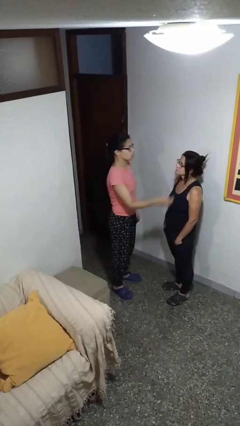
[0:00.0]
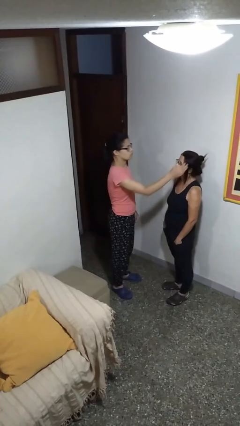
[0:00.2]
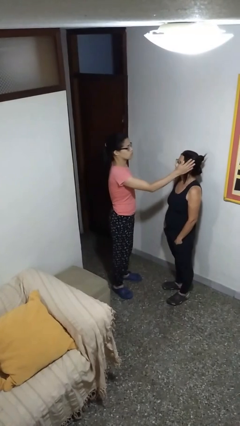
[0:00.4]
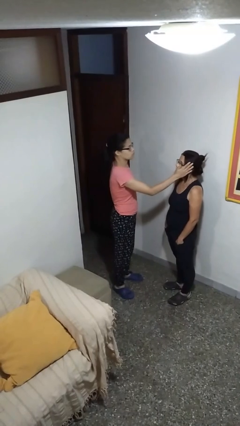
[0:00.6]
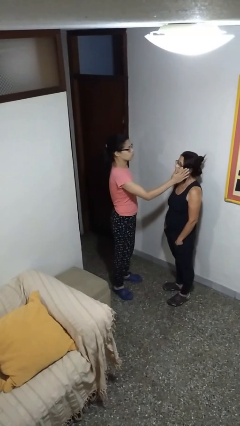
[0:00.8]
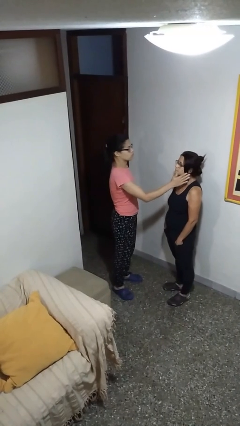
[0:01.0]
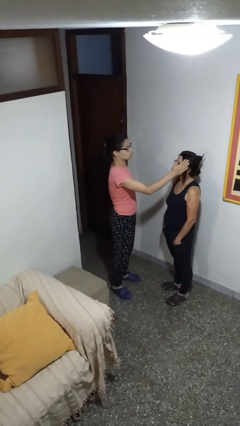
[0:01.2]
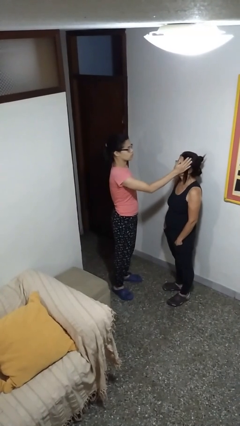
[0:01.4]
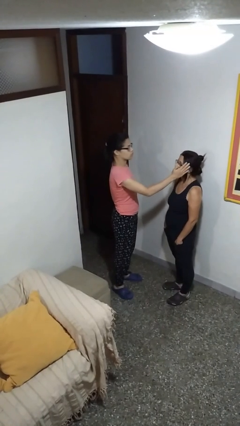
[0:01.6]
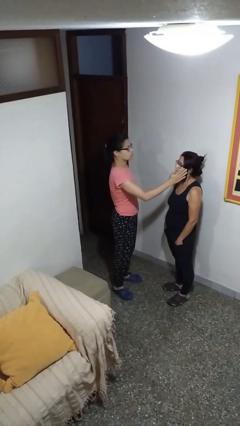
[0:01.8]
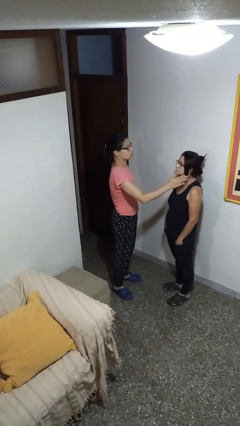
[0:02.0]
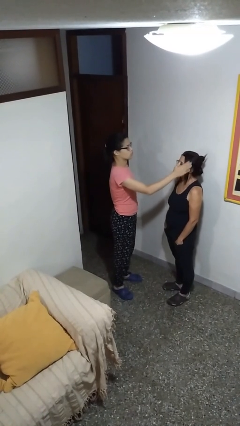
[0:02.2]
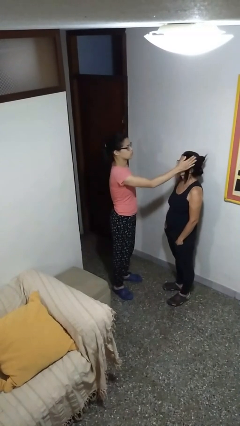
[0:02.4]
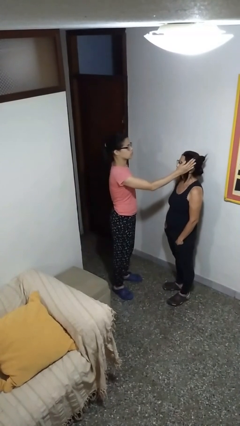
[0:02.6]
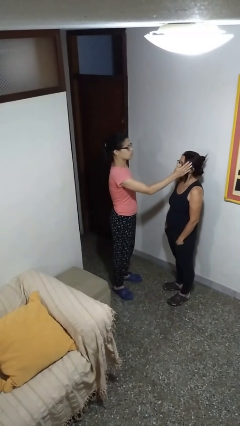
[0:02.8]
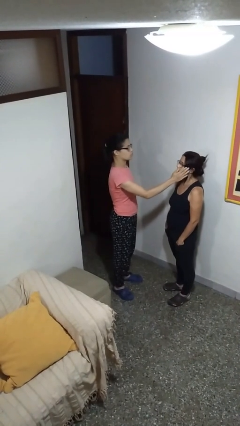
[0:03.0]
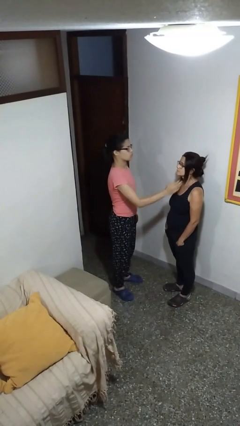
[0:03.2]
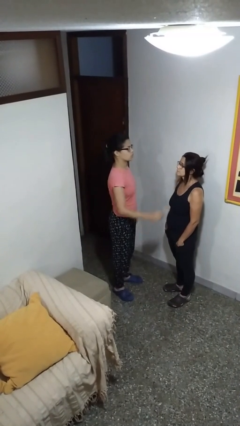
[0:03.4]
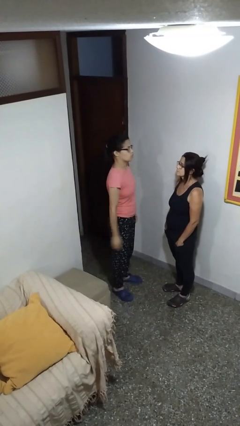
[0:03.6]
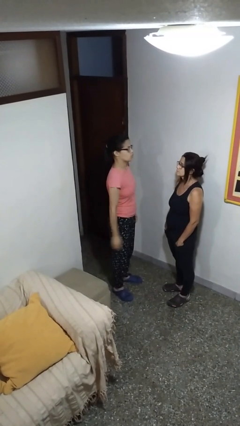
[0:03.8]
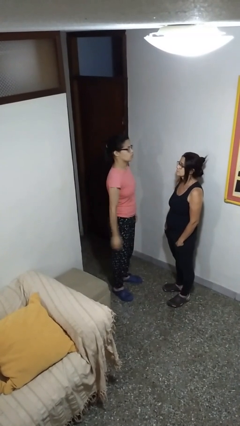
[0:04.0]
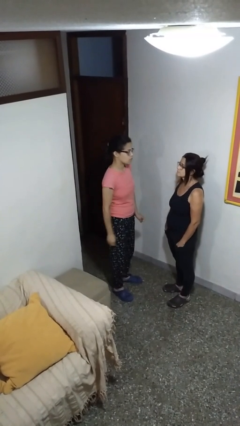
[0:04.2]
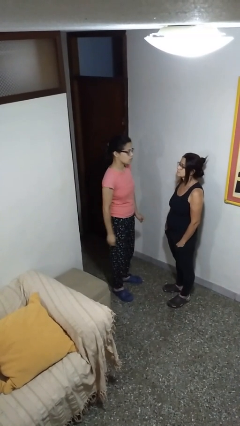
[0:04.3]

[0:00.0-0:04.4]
person touches face of person

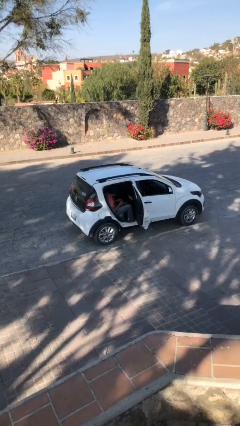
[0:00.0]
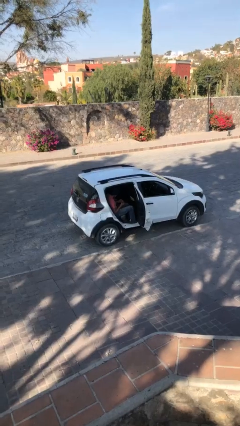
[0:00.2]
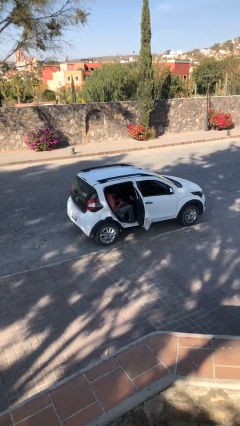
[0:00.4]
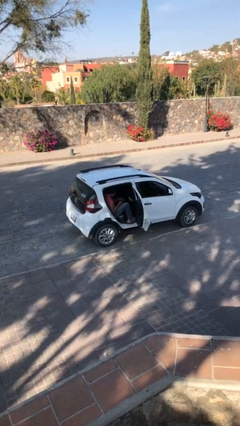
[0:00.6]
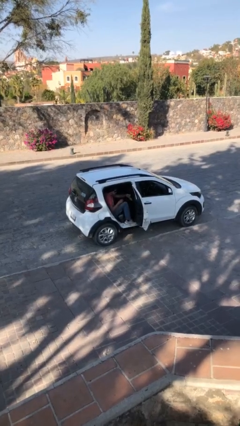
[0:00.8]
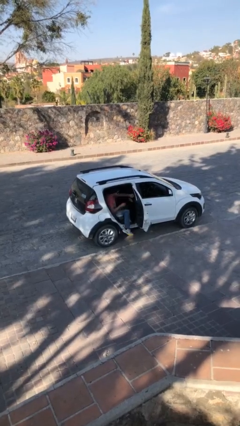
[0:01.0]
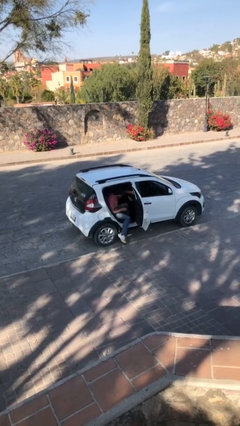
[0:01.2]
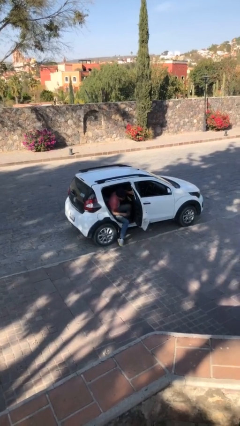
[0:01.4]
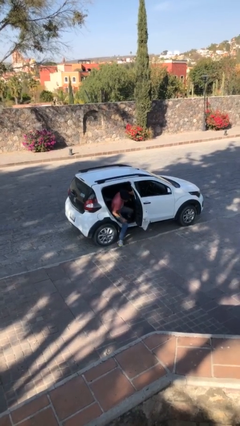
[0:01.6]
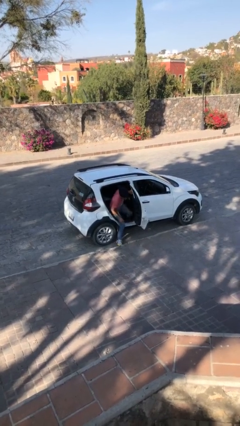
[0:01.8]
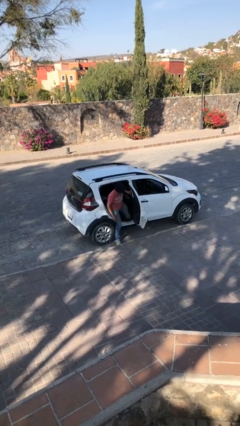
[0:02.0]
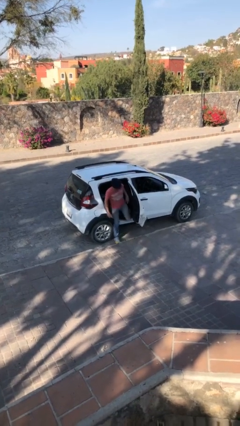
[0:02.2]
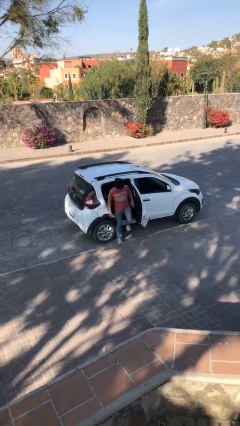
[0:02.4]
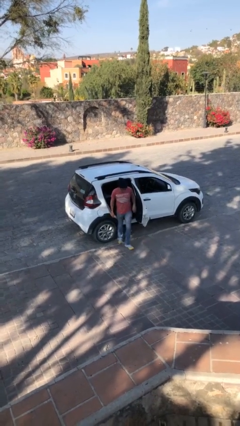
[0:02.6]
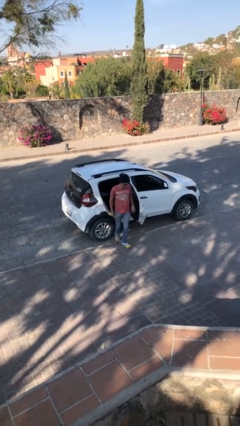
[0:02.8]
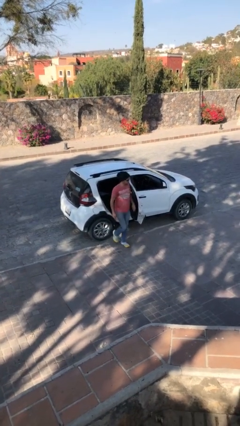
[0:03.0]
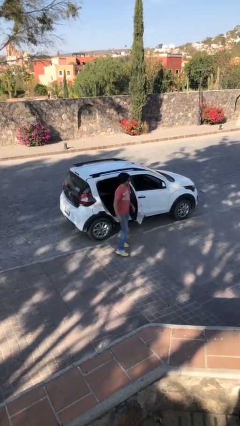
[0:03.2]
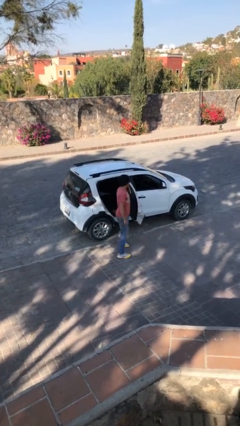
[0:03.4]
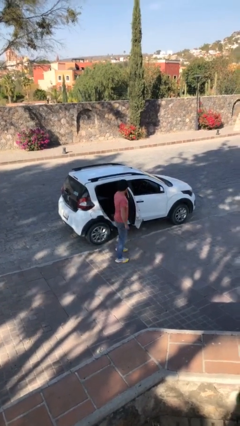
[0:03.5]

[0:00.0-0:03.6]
person exits car

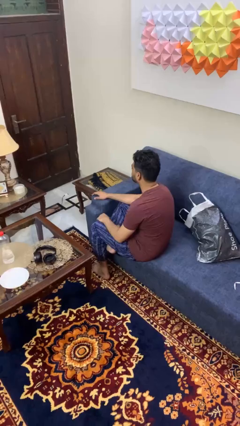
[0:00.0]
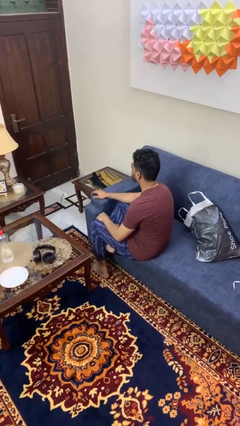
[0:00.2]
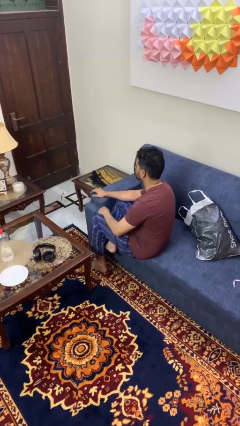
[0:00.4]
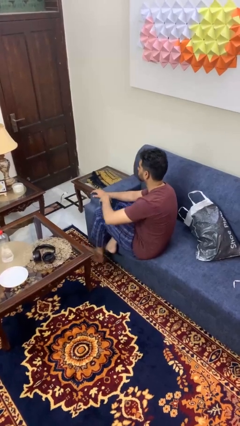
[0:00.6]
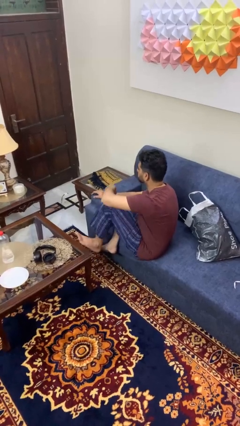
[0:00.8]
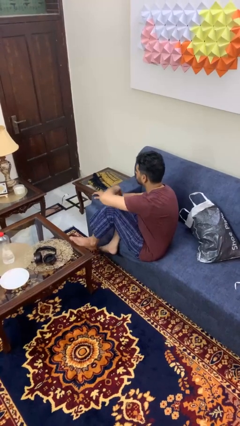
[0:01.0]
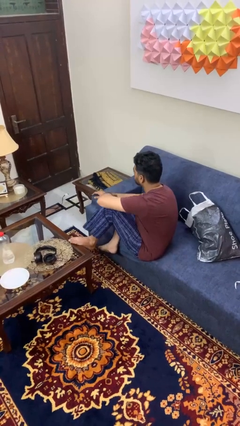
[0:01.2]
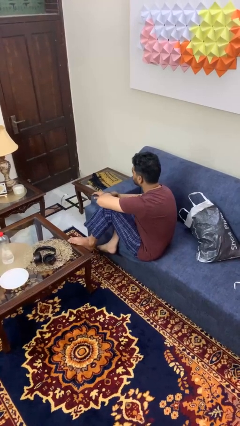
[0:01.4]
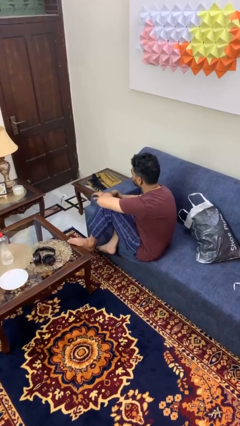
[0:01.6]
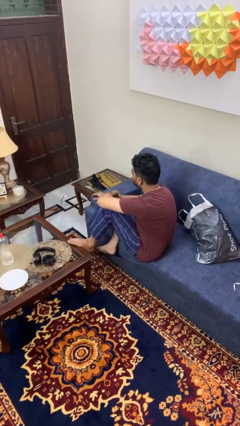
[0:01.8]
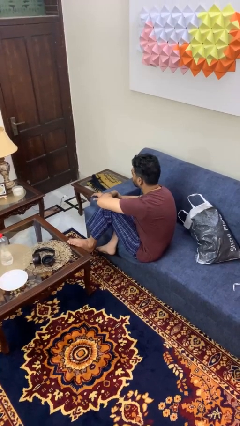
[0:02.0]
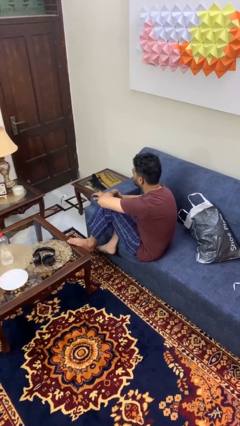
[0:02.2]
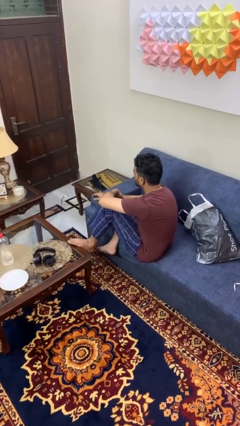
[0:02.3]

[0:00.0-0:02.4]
person puts feet up

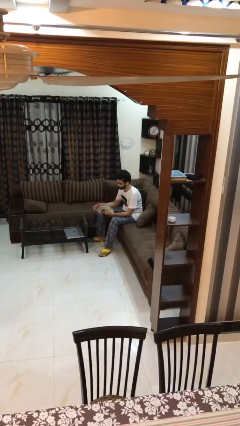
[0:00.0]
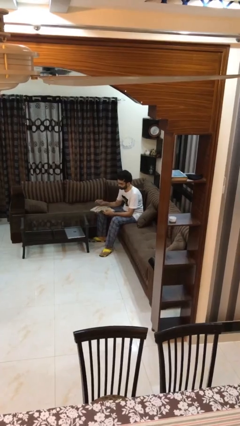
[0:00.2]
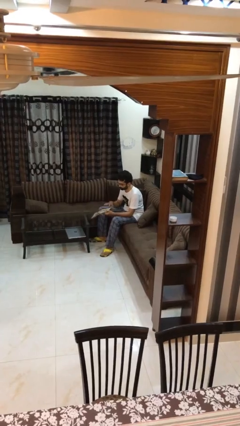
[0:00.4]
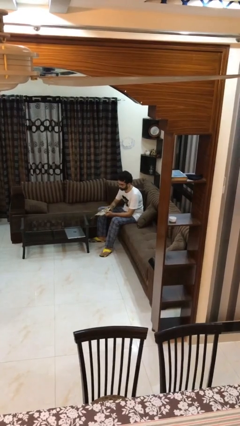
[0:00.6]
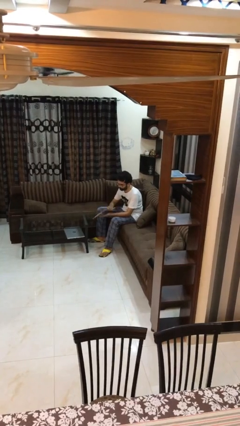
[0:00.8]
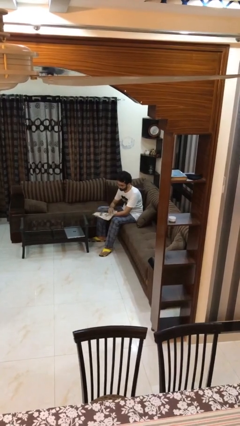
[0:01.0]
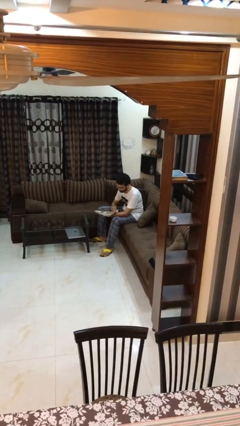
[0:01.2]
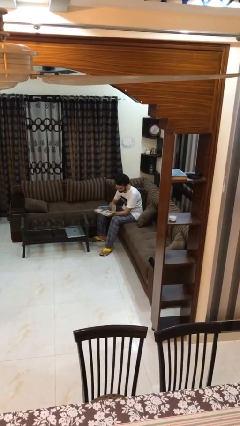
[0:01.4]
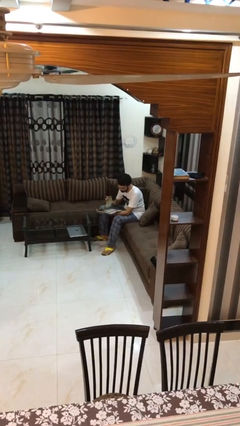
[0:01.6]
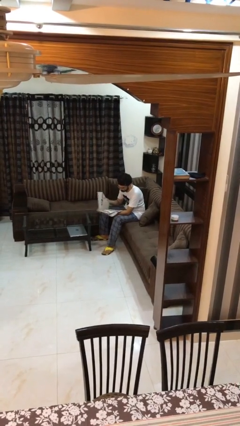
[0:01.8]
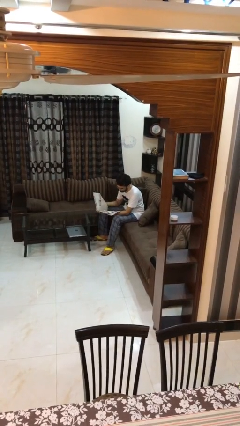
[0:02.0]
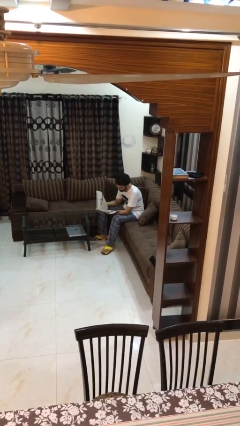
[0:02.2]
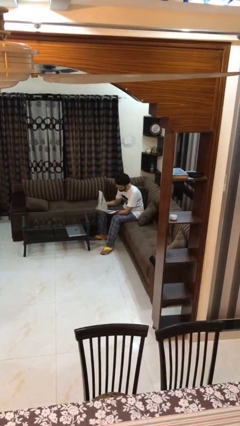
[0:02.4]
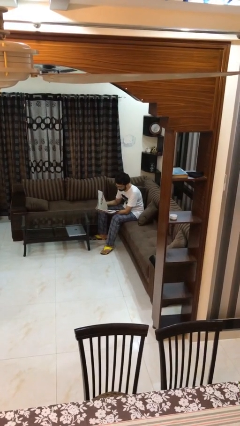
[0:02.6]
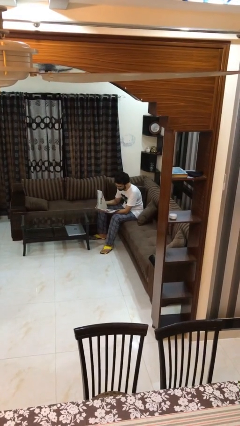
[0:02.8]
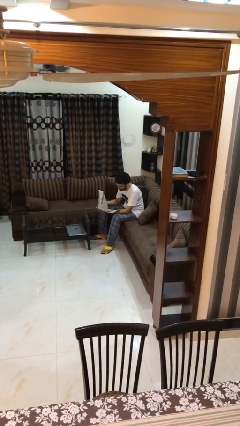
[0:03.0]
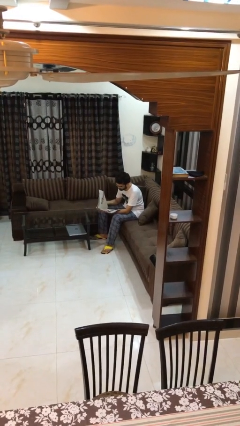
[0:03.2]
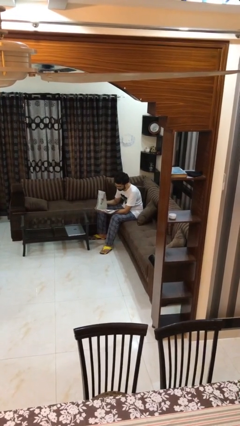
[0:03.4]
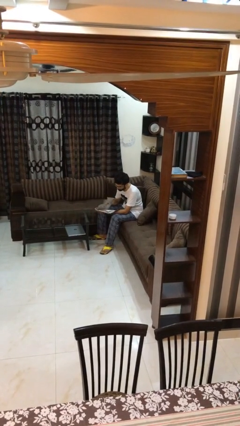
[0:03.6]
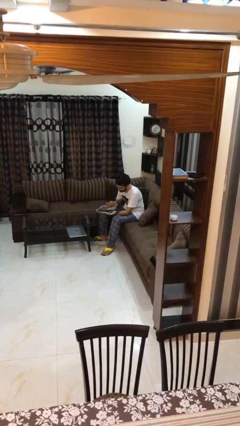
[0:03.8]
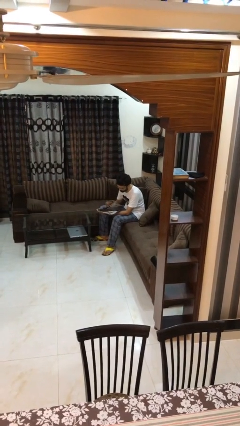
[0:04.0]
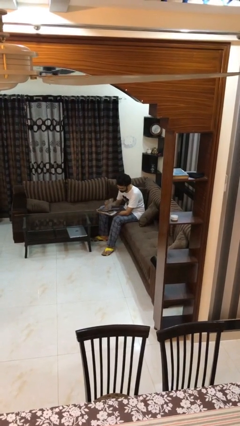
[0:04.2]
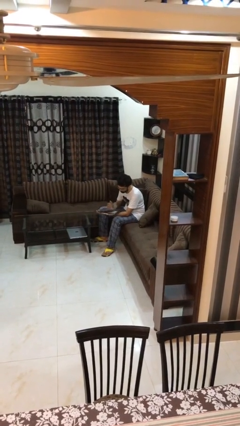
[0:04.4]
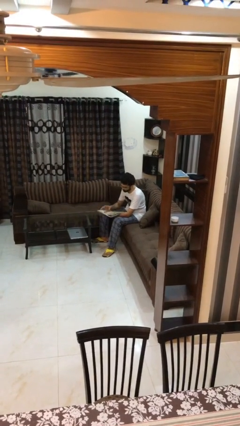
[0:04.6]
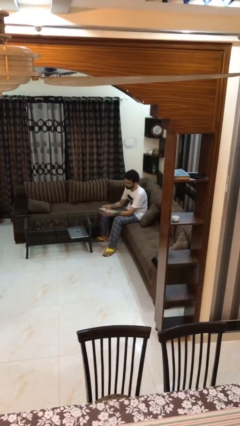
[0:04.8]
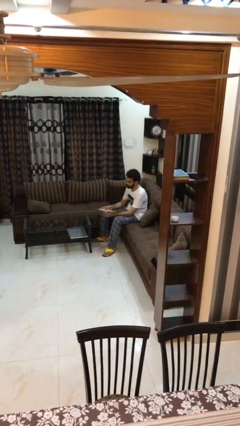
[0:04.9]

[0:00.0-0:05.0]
person reads document

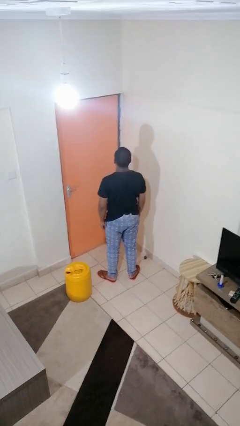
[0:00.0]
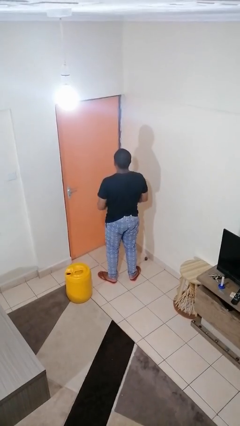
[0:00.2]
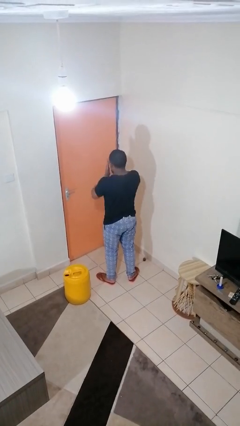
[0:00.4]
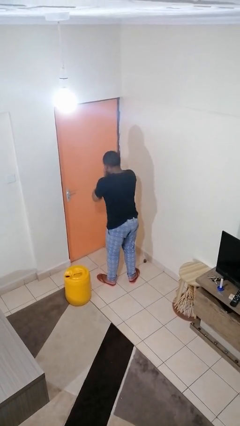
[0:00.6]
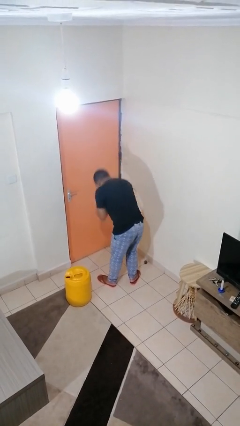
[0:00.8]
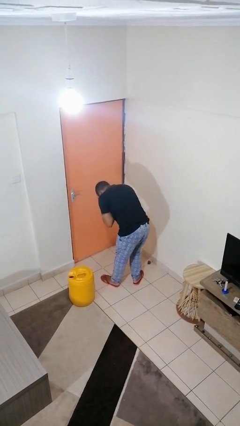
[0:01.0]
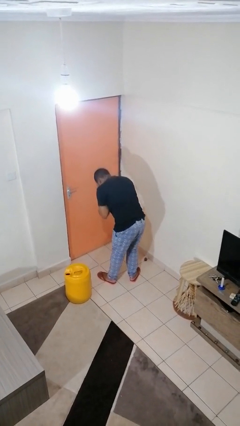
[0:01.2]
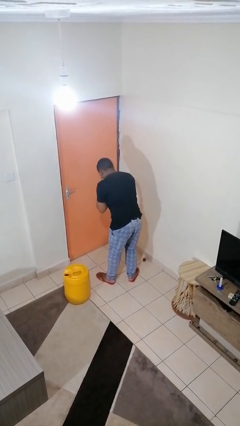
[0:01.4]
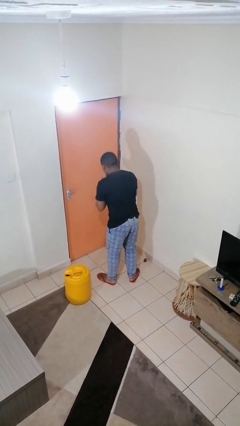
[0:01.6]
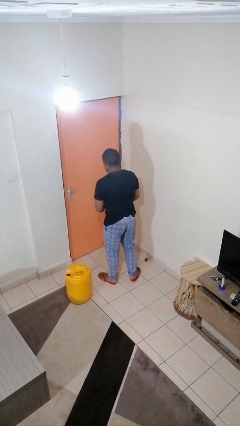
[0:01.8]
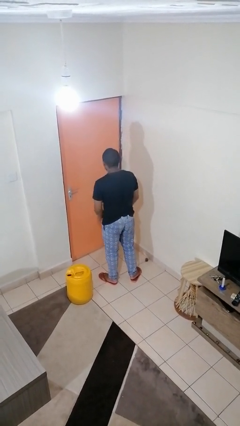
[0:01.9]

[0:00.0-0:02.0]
person sneezes into hand
